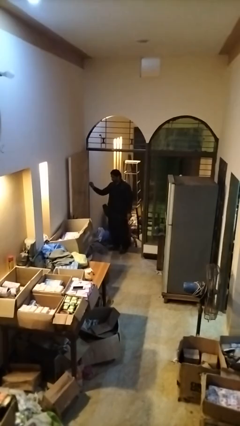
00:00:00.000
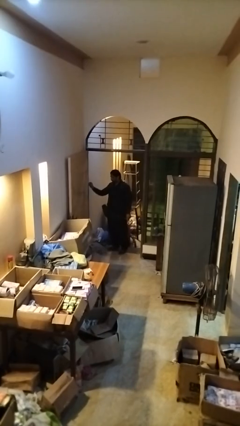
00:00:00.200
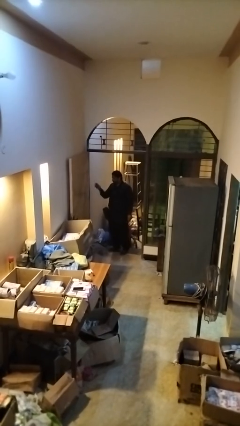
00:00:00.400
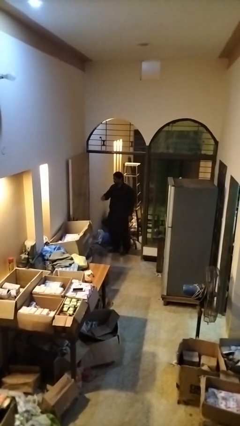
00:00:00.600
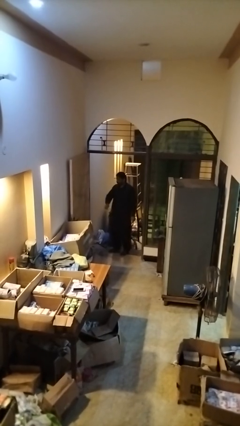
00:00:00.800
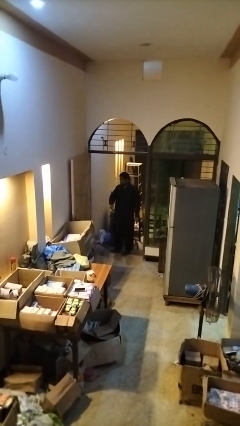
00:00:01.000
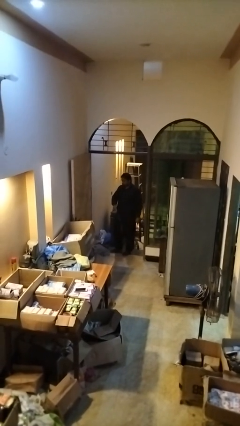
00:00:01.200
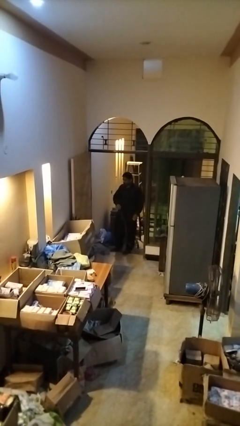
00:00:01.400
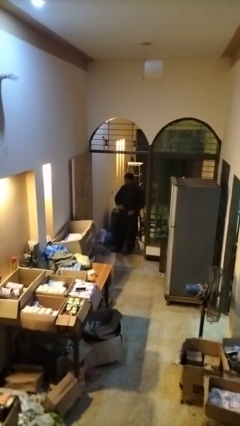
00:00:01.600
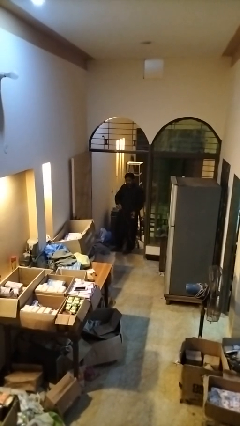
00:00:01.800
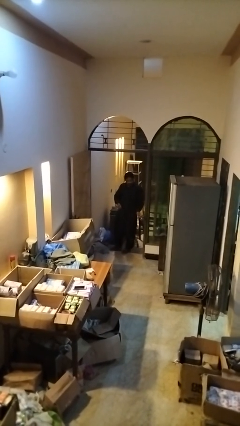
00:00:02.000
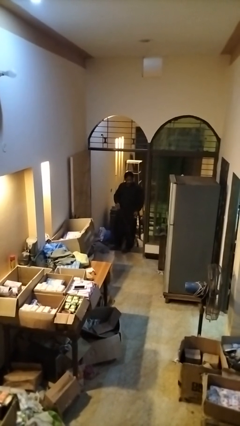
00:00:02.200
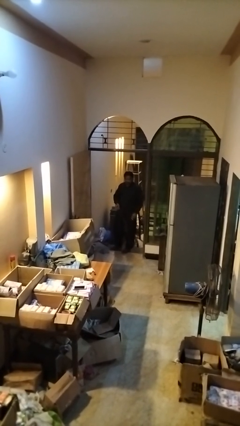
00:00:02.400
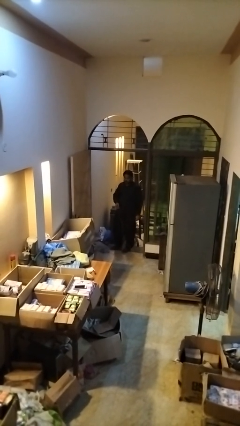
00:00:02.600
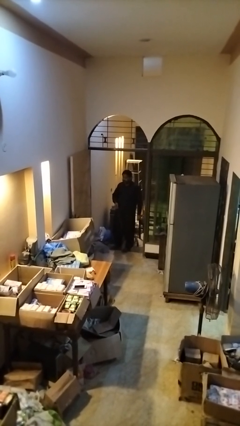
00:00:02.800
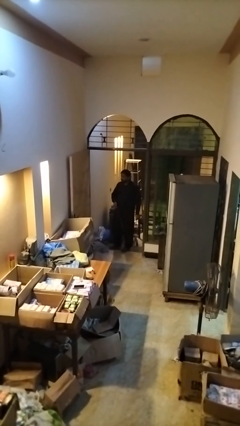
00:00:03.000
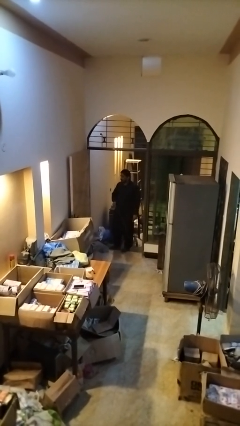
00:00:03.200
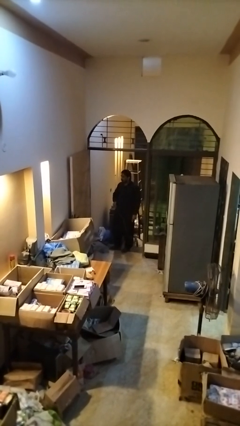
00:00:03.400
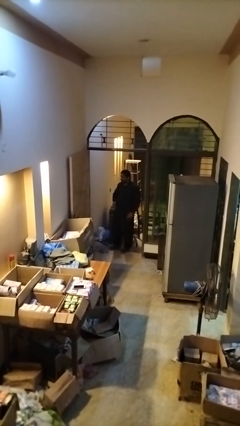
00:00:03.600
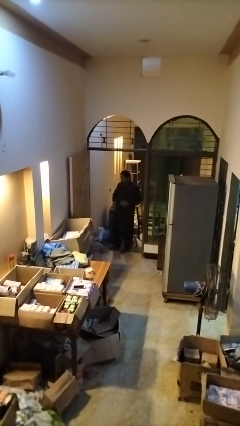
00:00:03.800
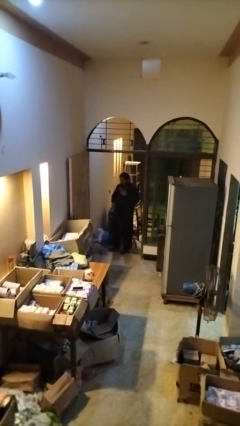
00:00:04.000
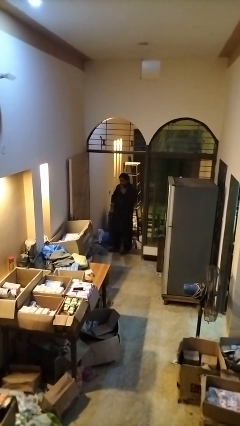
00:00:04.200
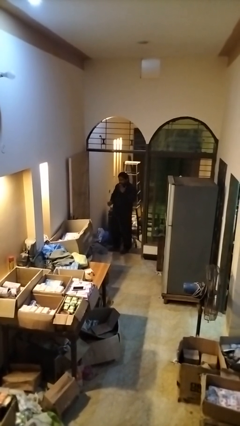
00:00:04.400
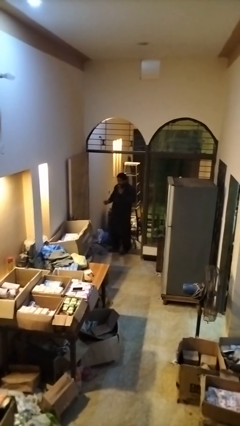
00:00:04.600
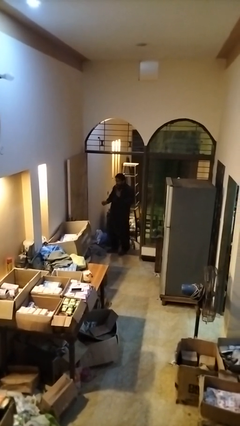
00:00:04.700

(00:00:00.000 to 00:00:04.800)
person unplugs from electrical socket

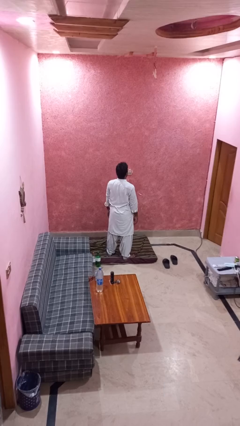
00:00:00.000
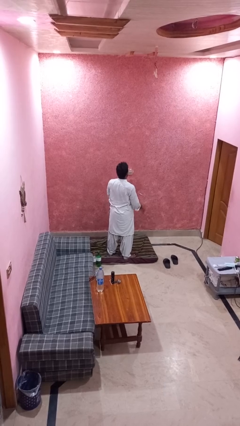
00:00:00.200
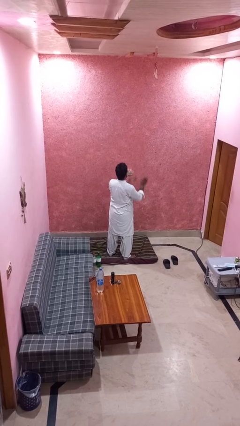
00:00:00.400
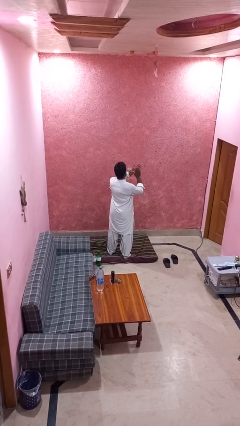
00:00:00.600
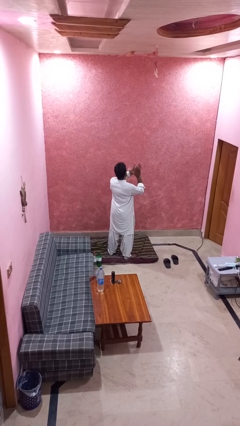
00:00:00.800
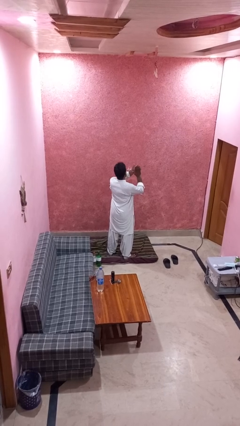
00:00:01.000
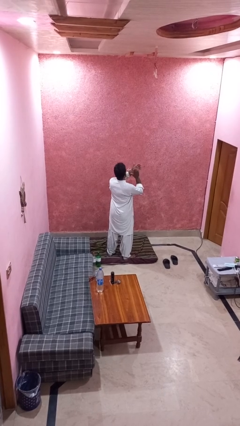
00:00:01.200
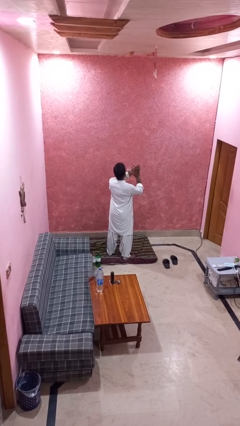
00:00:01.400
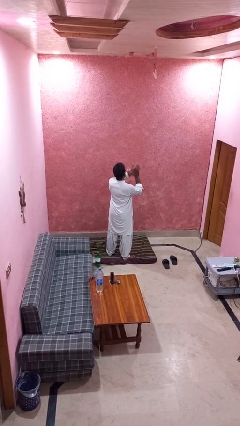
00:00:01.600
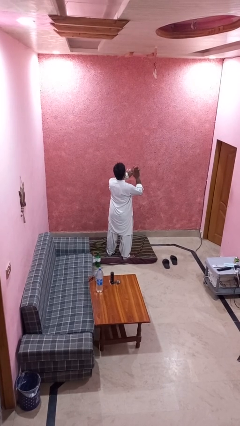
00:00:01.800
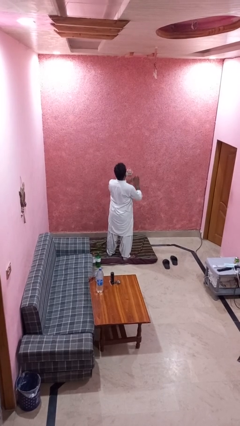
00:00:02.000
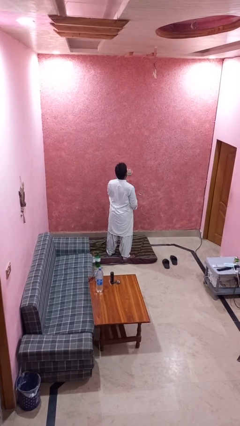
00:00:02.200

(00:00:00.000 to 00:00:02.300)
person claps hands

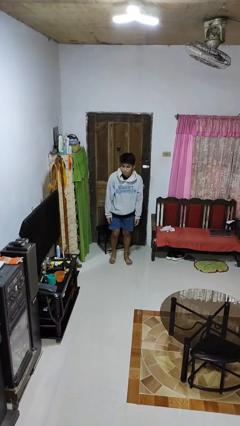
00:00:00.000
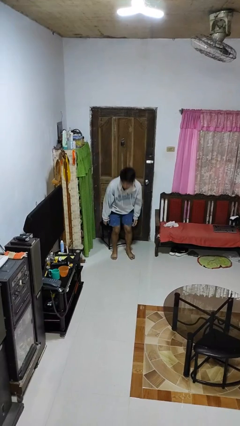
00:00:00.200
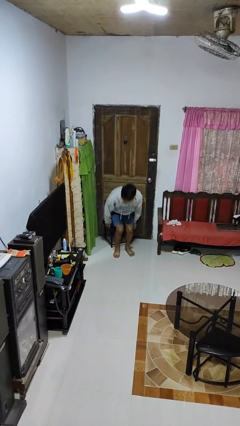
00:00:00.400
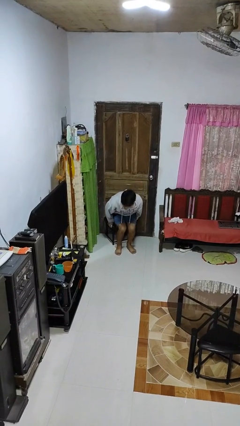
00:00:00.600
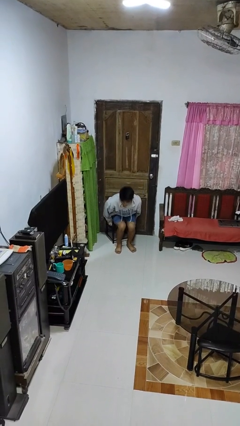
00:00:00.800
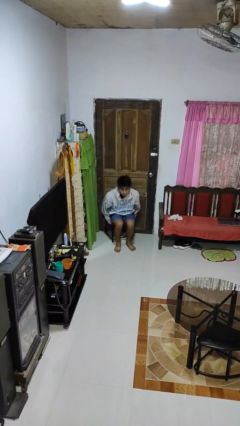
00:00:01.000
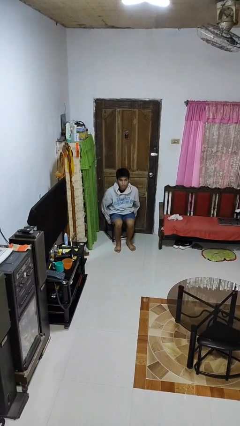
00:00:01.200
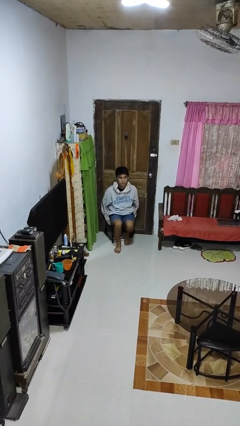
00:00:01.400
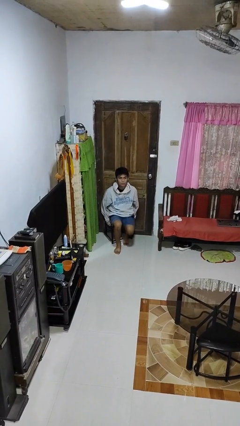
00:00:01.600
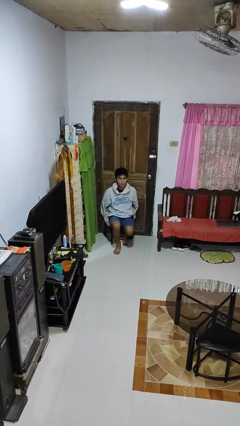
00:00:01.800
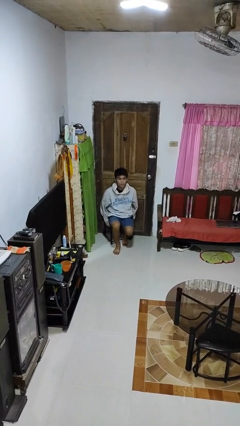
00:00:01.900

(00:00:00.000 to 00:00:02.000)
person sits down

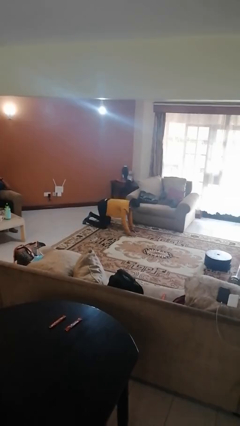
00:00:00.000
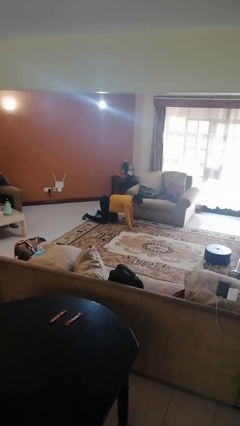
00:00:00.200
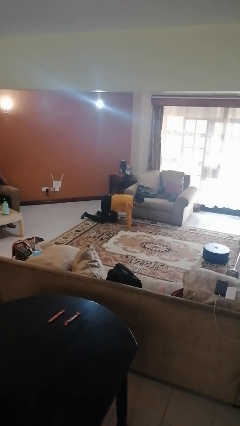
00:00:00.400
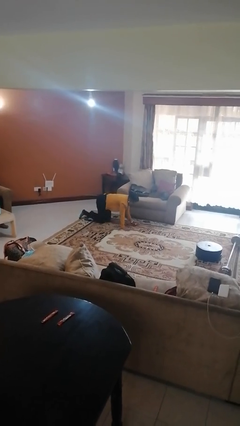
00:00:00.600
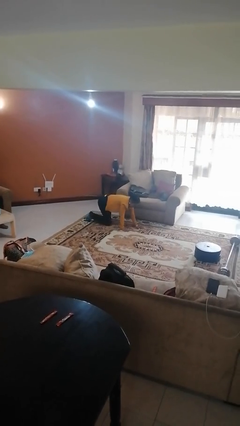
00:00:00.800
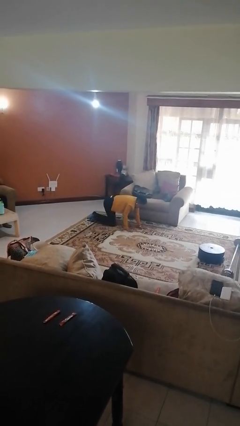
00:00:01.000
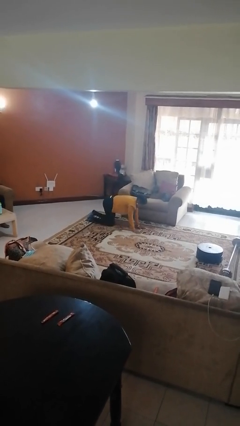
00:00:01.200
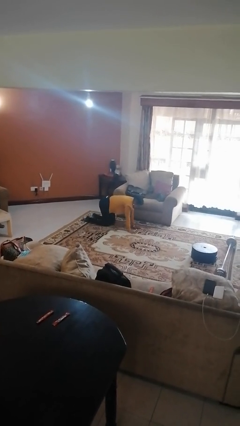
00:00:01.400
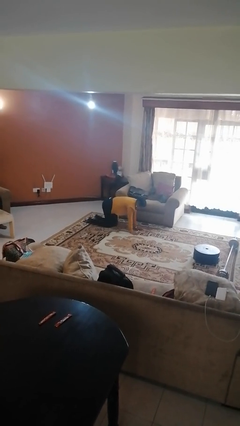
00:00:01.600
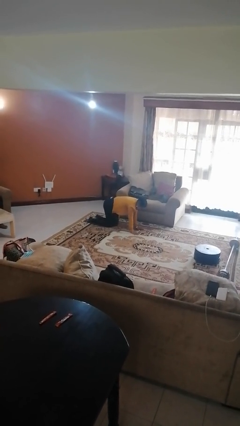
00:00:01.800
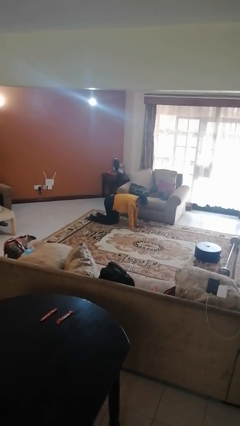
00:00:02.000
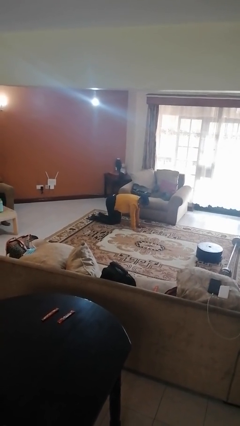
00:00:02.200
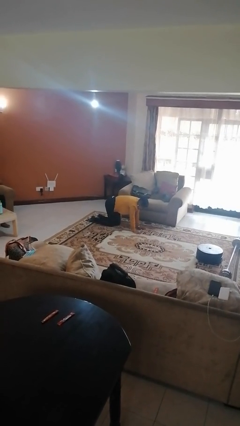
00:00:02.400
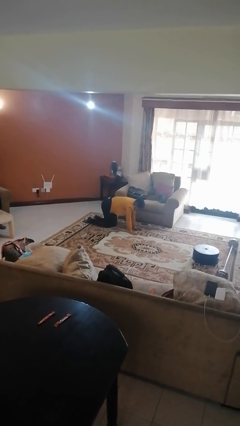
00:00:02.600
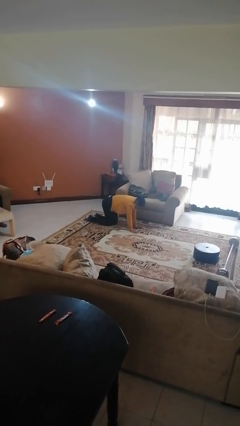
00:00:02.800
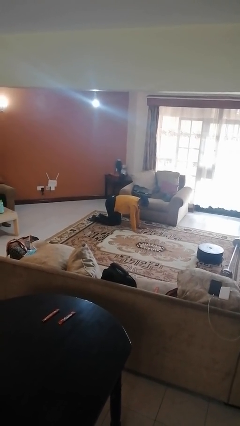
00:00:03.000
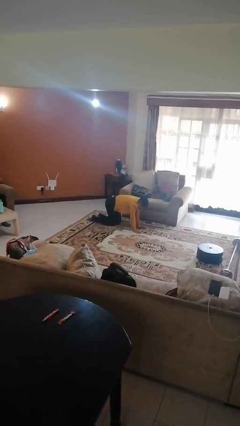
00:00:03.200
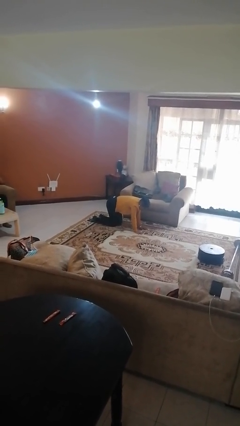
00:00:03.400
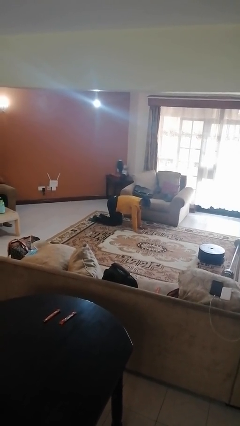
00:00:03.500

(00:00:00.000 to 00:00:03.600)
person crawls

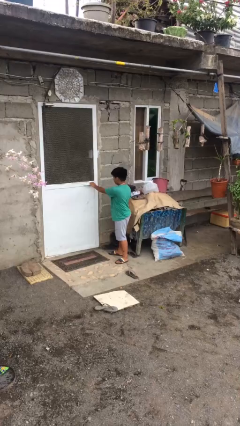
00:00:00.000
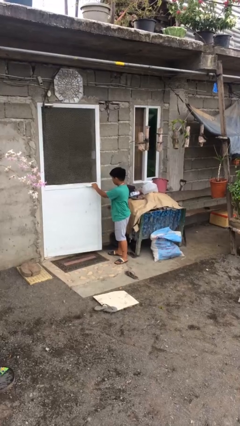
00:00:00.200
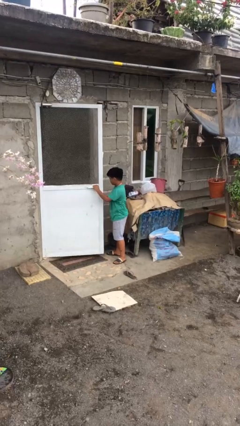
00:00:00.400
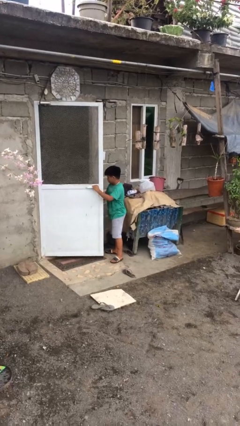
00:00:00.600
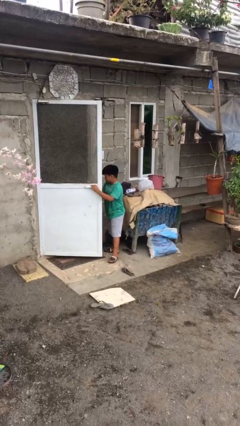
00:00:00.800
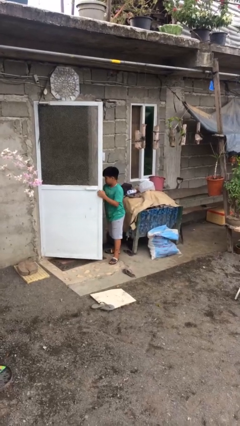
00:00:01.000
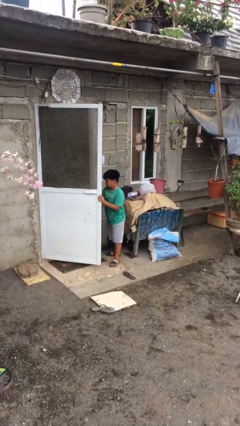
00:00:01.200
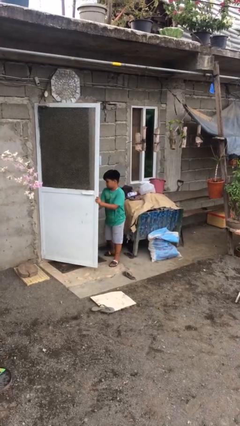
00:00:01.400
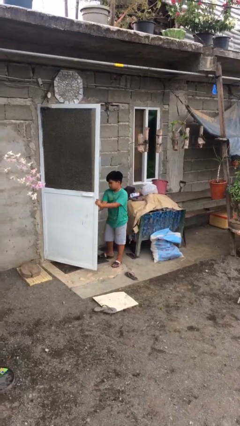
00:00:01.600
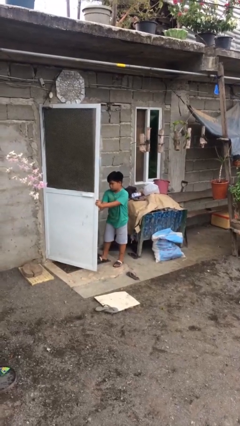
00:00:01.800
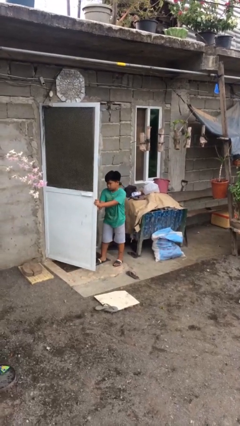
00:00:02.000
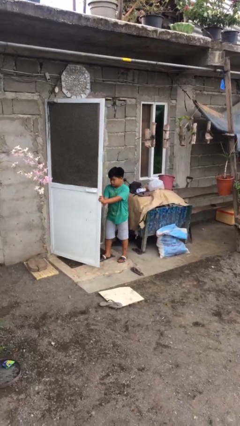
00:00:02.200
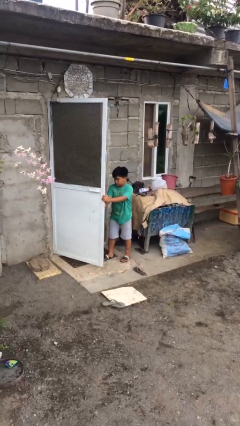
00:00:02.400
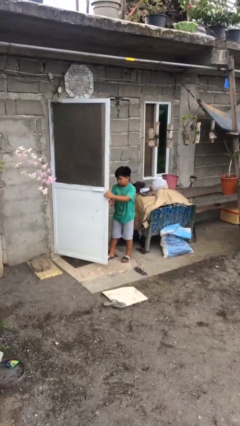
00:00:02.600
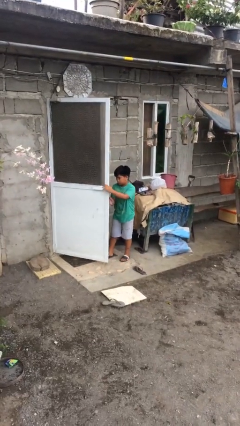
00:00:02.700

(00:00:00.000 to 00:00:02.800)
person opens facility door

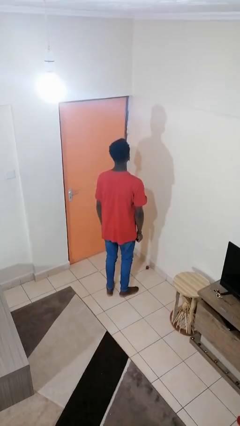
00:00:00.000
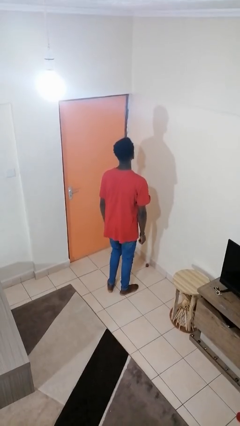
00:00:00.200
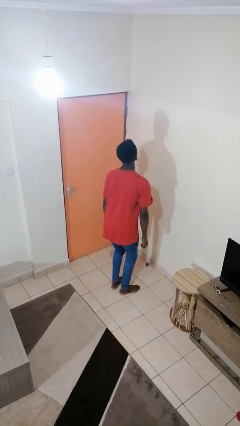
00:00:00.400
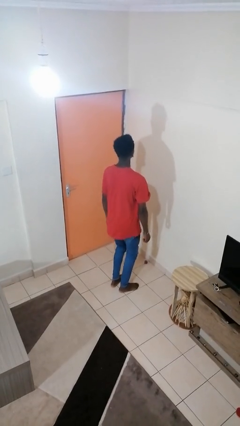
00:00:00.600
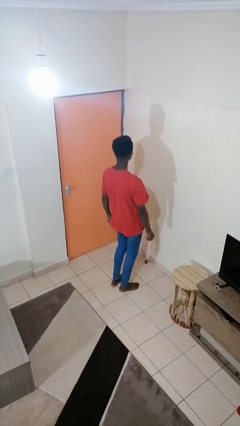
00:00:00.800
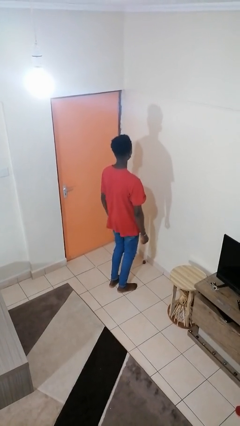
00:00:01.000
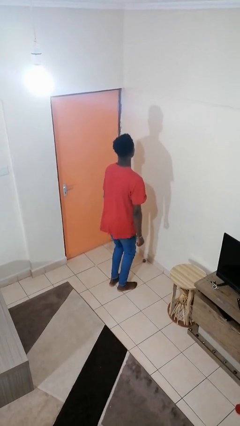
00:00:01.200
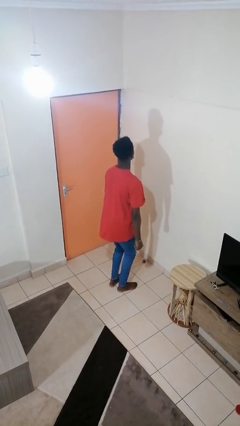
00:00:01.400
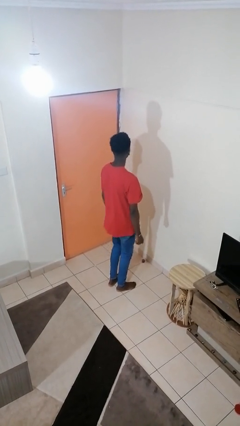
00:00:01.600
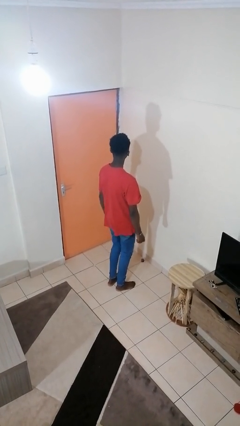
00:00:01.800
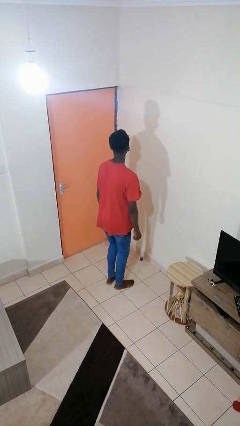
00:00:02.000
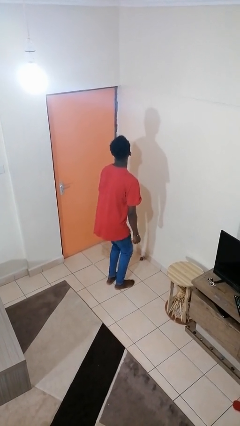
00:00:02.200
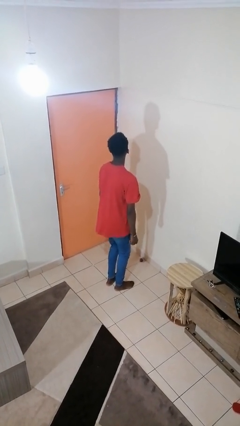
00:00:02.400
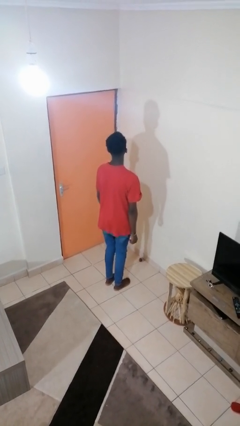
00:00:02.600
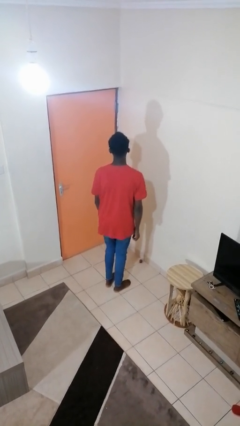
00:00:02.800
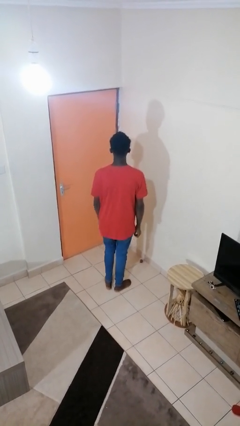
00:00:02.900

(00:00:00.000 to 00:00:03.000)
person wiggles hips
